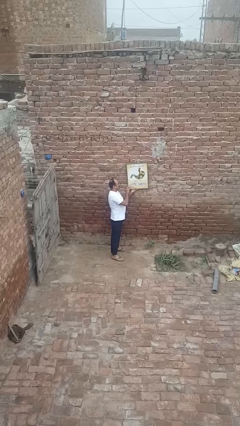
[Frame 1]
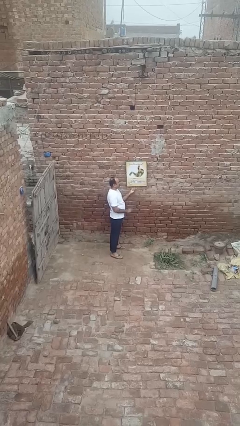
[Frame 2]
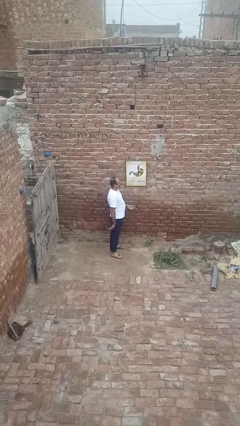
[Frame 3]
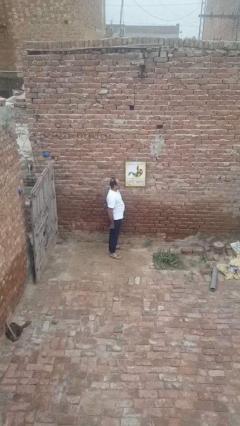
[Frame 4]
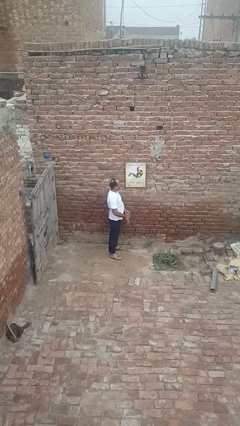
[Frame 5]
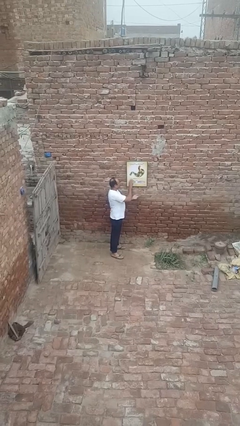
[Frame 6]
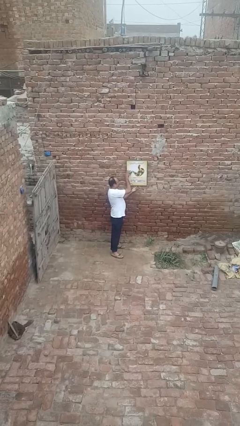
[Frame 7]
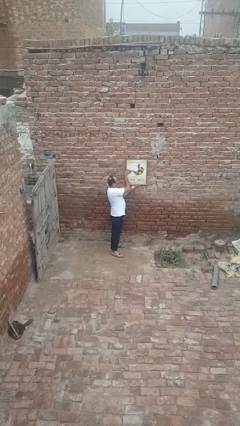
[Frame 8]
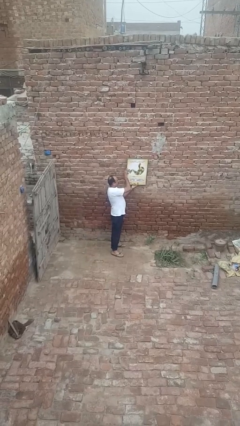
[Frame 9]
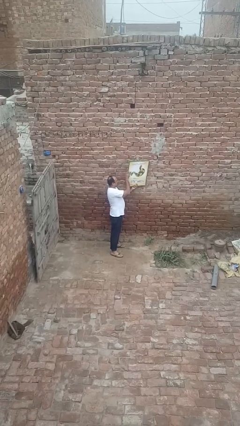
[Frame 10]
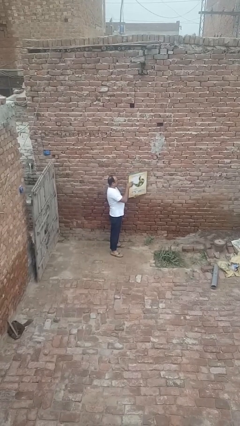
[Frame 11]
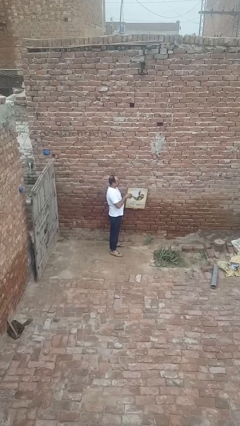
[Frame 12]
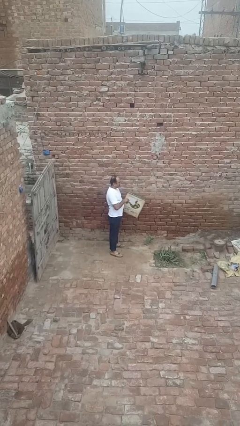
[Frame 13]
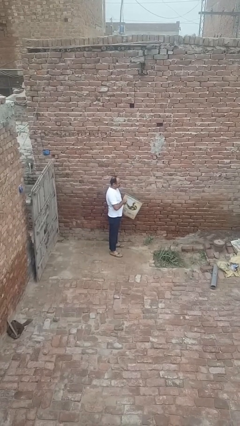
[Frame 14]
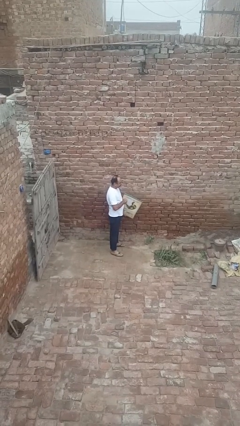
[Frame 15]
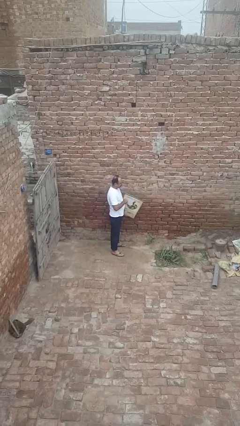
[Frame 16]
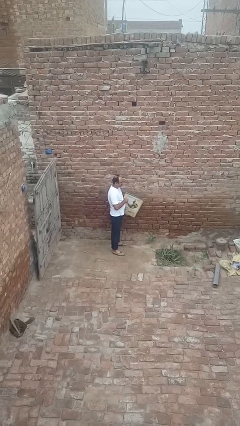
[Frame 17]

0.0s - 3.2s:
person takes down picture frame

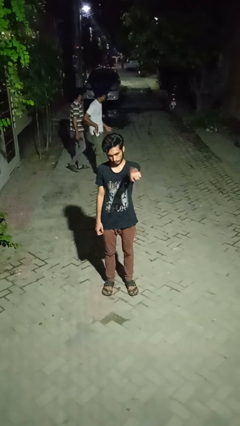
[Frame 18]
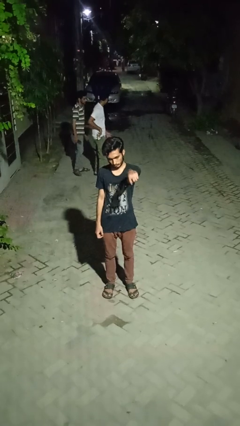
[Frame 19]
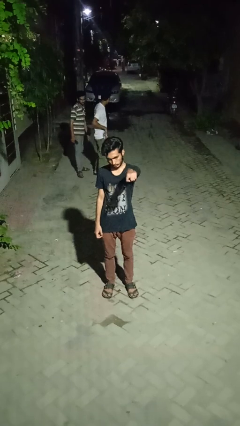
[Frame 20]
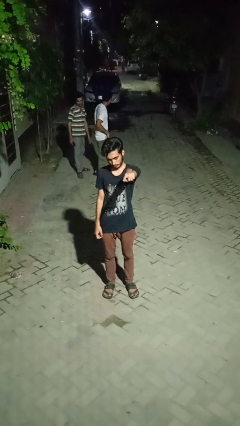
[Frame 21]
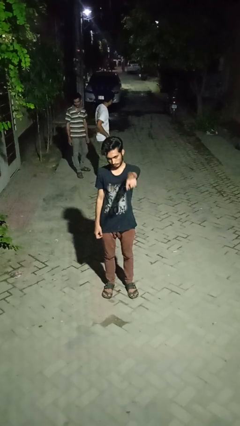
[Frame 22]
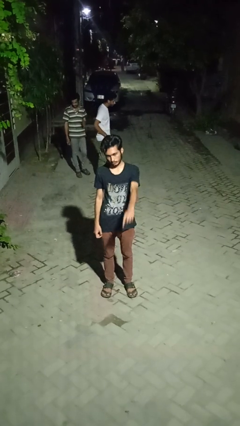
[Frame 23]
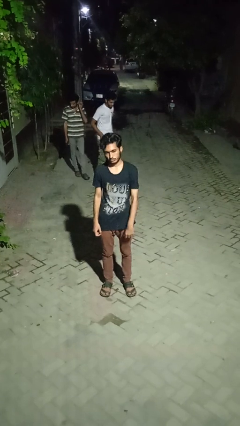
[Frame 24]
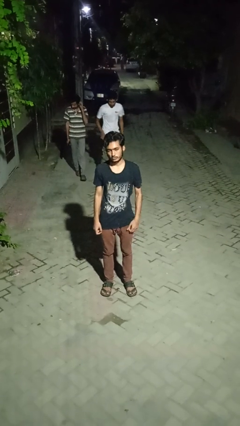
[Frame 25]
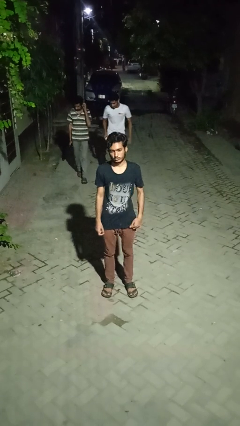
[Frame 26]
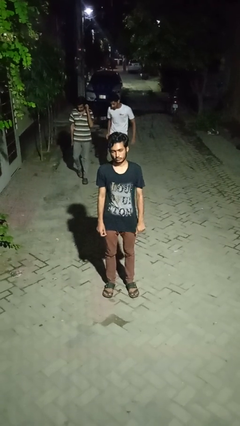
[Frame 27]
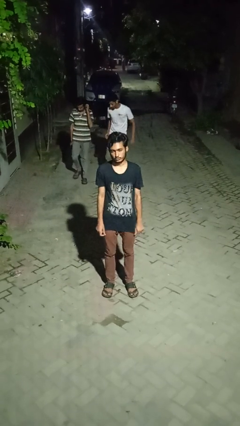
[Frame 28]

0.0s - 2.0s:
person points at person

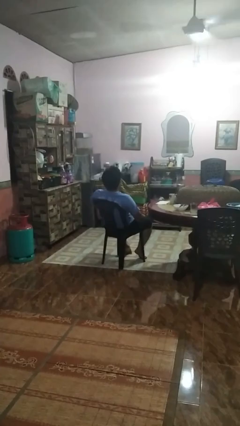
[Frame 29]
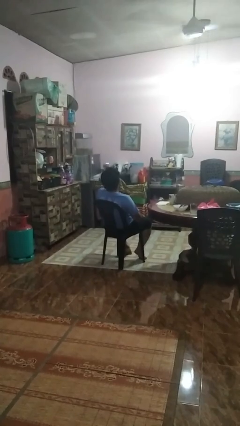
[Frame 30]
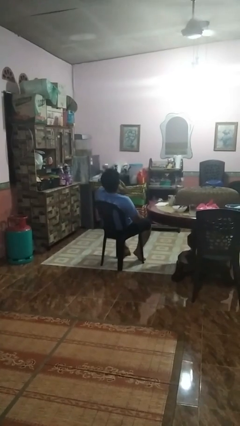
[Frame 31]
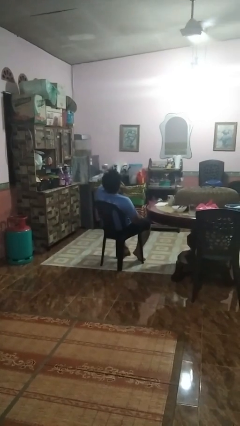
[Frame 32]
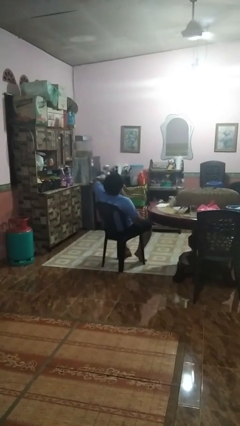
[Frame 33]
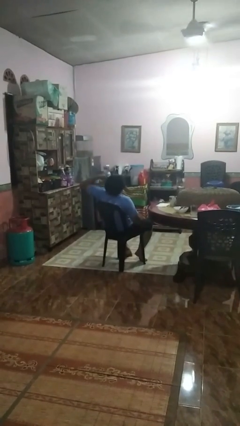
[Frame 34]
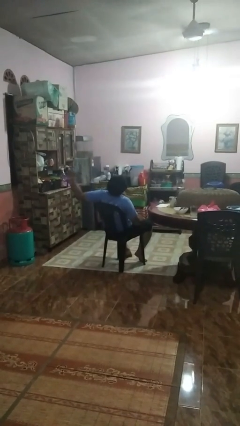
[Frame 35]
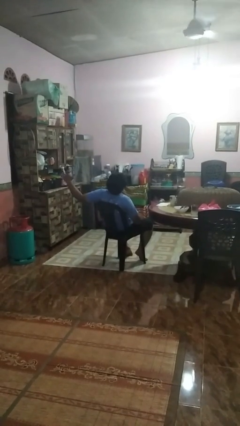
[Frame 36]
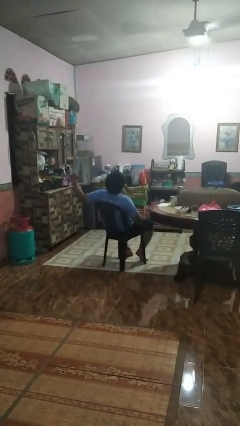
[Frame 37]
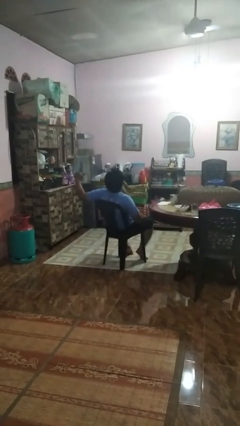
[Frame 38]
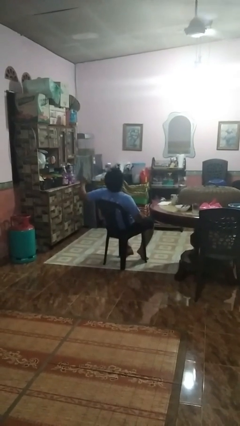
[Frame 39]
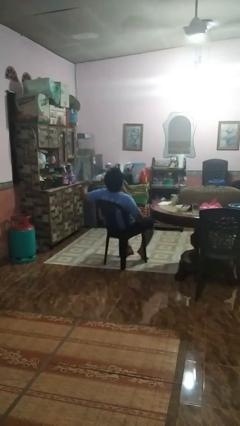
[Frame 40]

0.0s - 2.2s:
person gestures cut

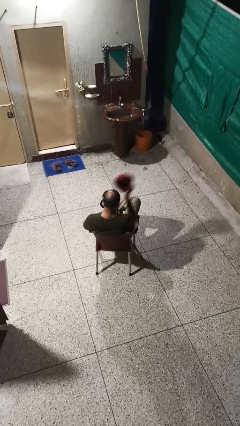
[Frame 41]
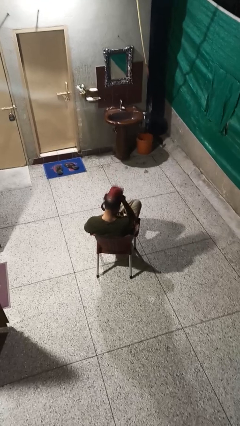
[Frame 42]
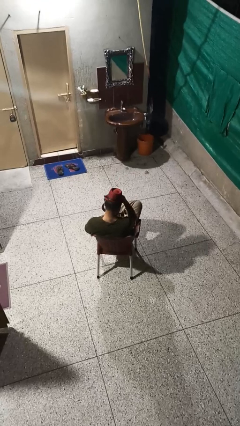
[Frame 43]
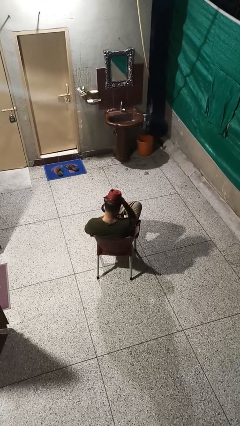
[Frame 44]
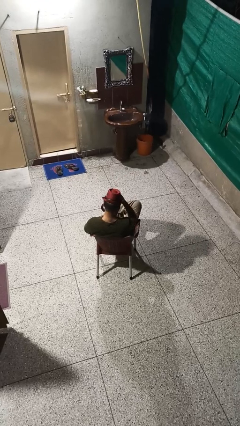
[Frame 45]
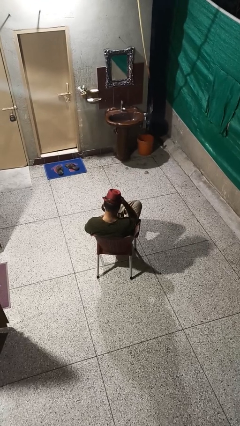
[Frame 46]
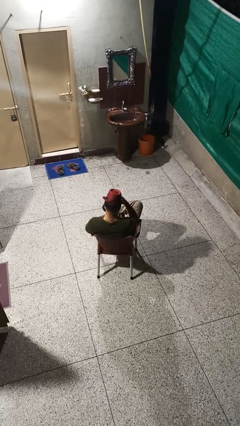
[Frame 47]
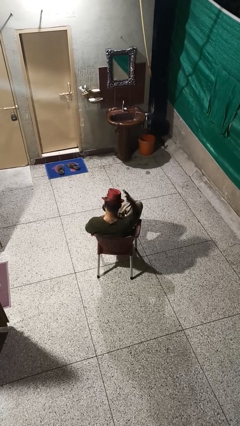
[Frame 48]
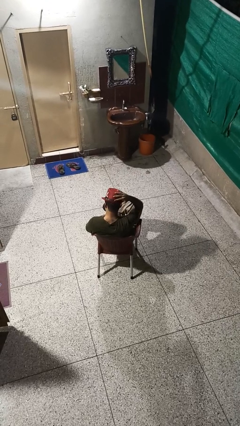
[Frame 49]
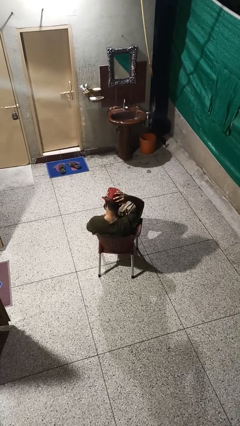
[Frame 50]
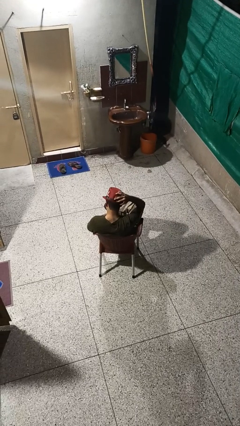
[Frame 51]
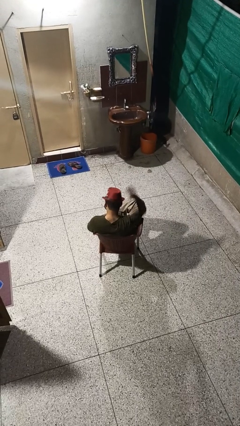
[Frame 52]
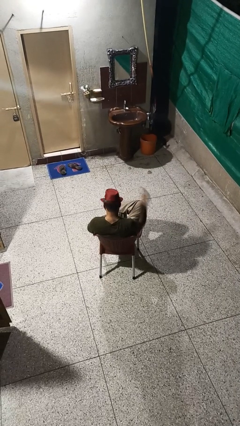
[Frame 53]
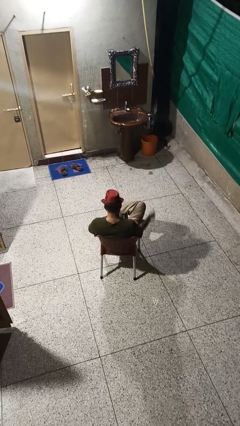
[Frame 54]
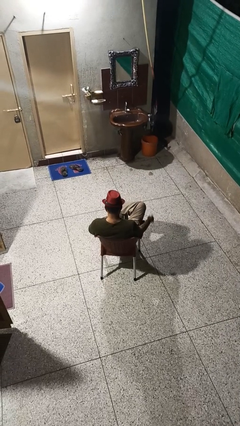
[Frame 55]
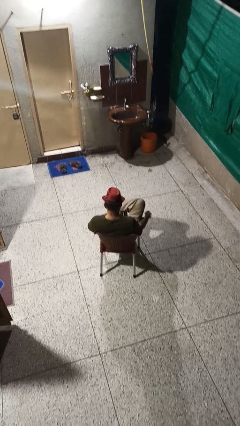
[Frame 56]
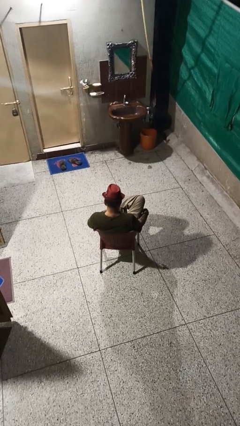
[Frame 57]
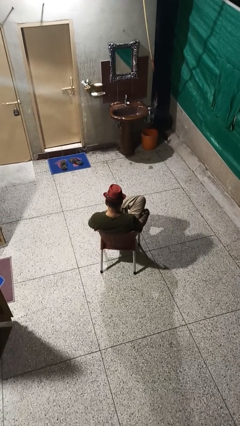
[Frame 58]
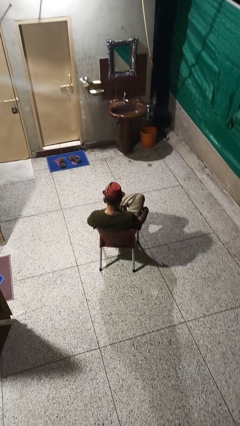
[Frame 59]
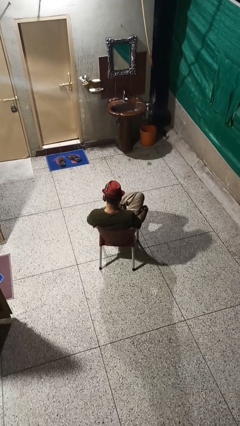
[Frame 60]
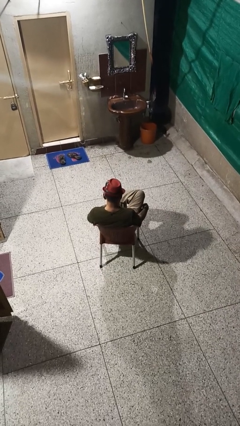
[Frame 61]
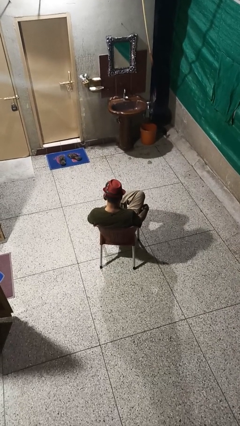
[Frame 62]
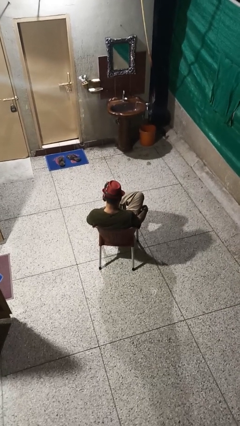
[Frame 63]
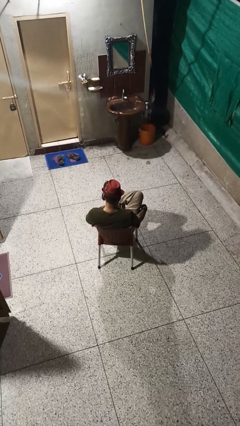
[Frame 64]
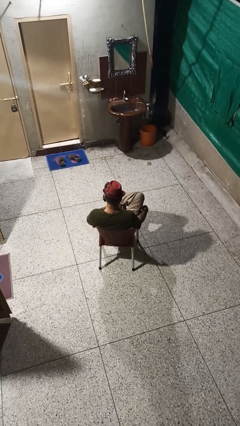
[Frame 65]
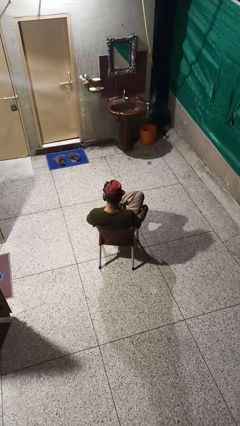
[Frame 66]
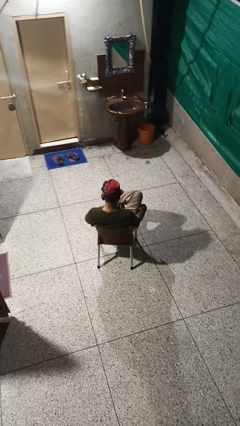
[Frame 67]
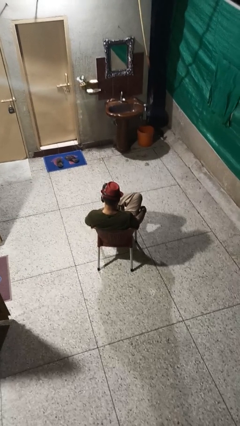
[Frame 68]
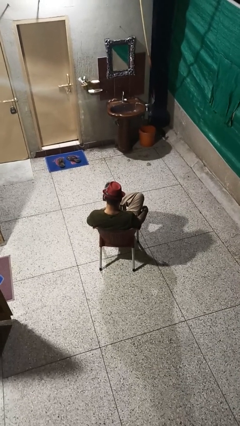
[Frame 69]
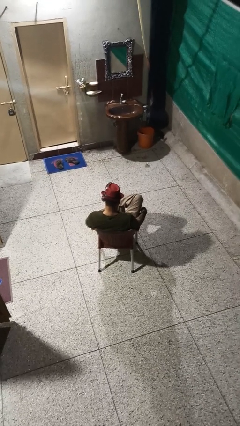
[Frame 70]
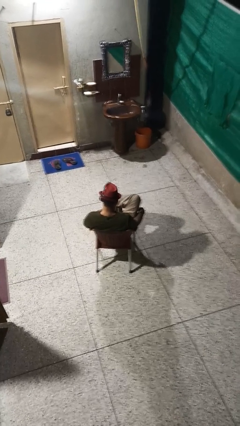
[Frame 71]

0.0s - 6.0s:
person puts on hat

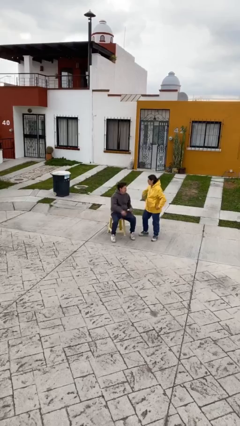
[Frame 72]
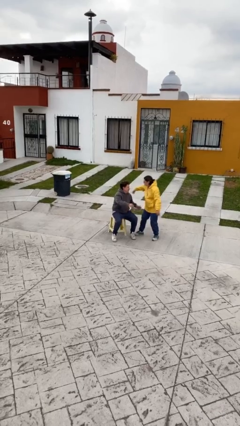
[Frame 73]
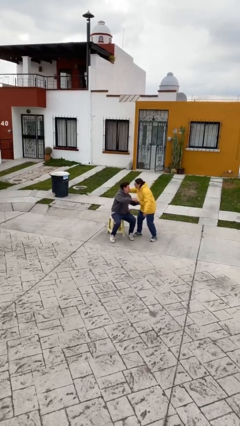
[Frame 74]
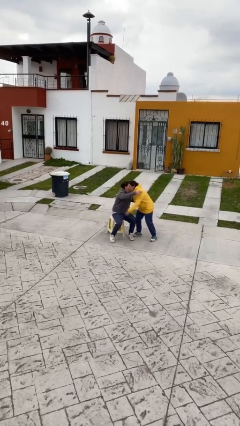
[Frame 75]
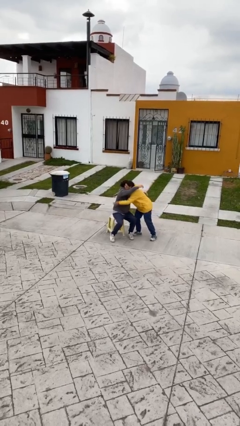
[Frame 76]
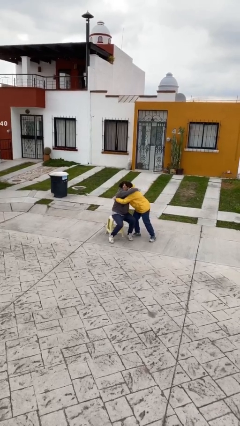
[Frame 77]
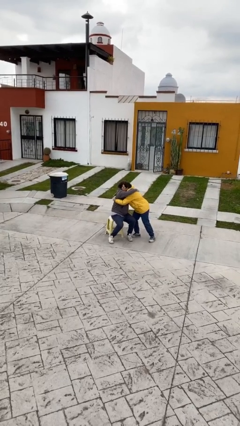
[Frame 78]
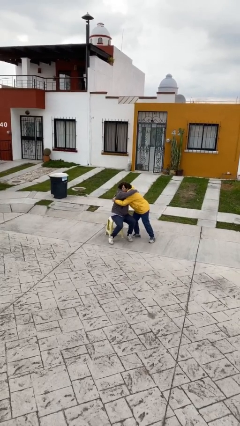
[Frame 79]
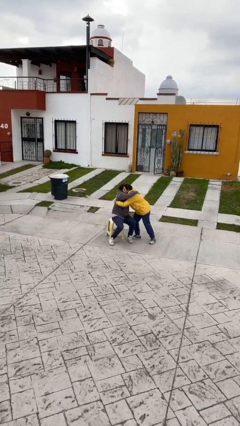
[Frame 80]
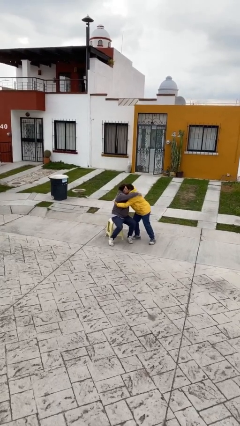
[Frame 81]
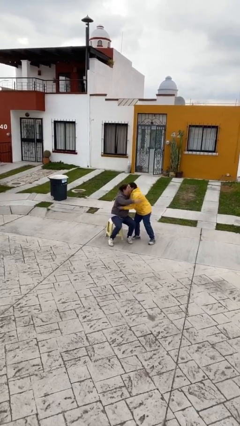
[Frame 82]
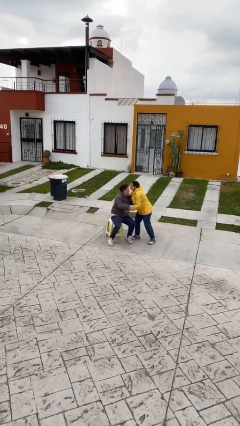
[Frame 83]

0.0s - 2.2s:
person embraces person

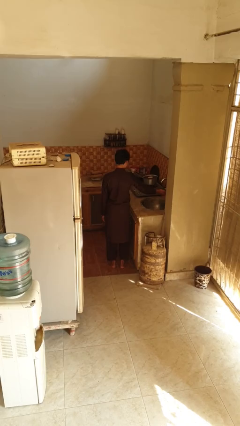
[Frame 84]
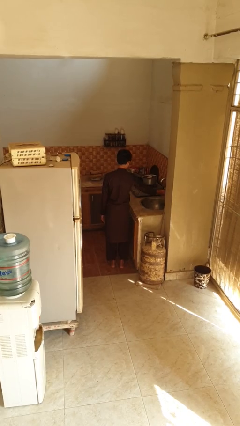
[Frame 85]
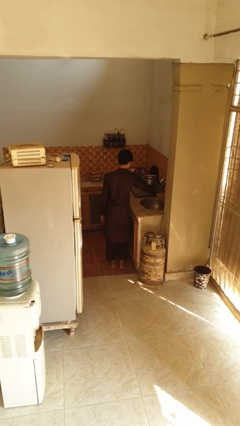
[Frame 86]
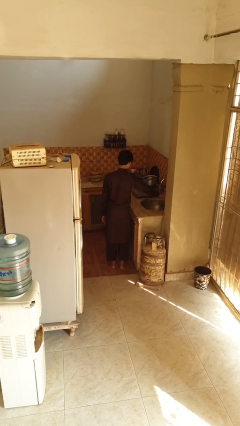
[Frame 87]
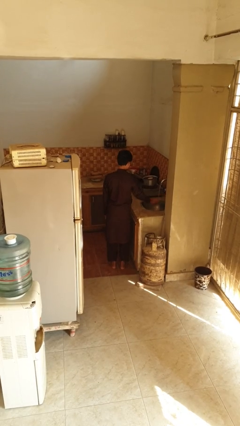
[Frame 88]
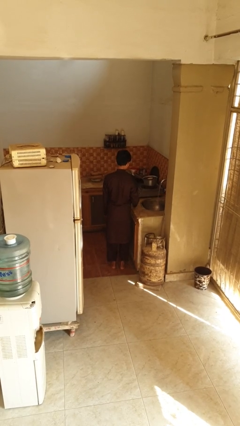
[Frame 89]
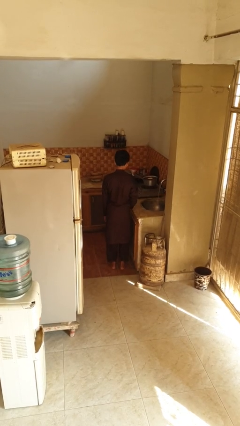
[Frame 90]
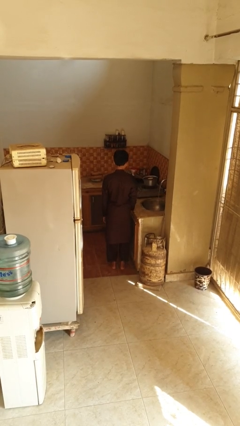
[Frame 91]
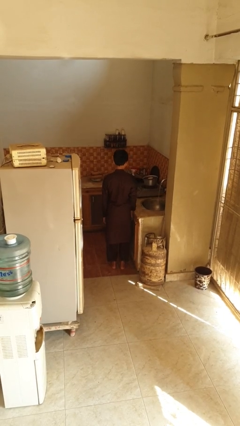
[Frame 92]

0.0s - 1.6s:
person turns on faucet

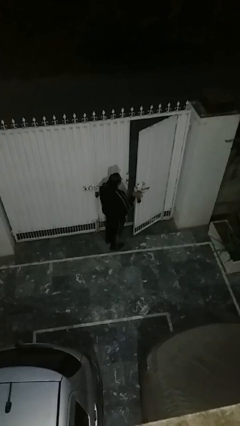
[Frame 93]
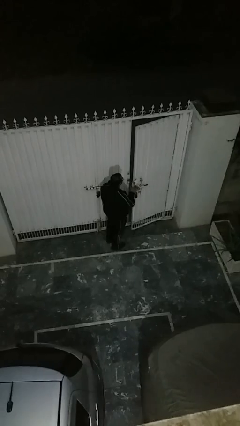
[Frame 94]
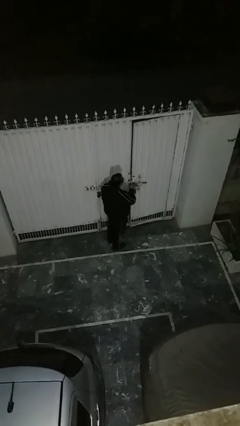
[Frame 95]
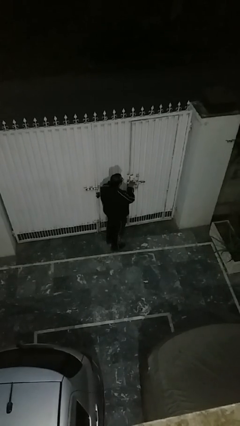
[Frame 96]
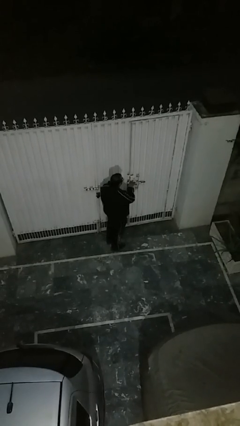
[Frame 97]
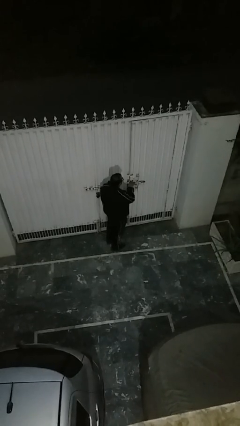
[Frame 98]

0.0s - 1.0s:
person closes facility door
